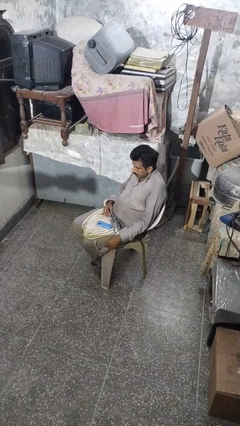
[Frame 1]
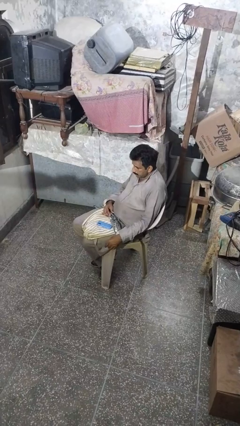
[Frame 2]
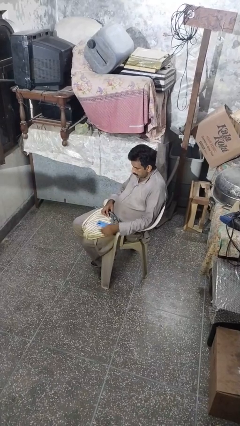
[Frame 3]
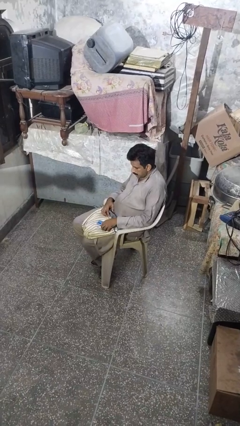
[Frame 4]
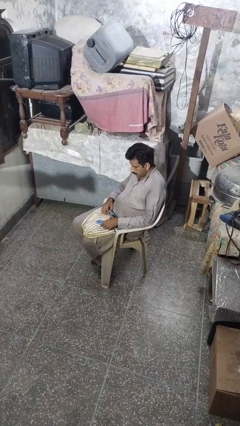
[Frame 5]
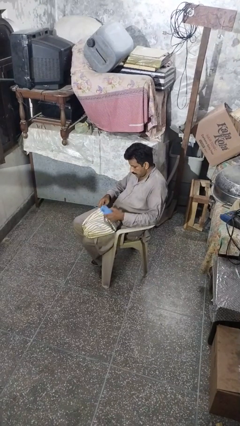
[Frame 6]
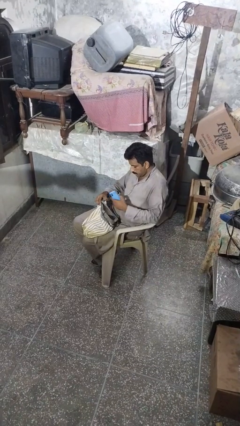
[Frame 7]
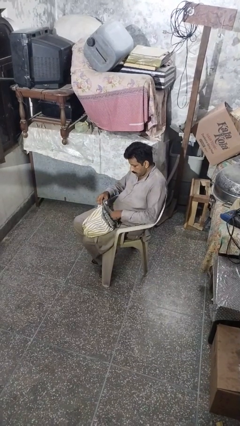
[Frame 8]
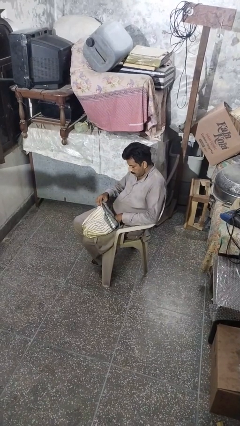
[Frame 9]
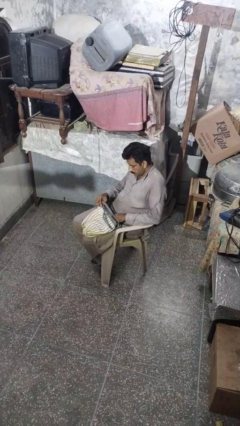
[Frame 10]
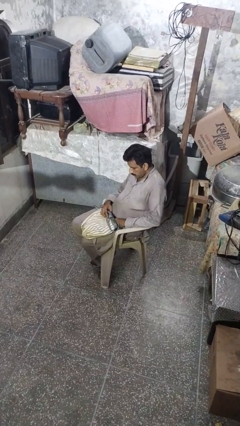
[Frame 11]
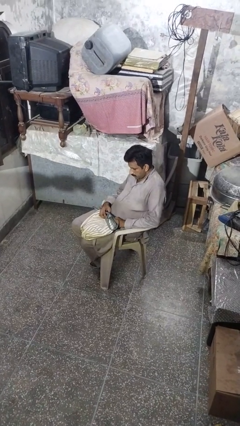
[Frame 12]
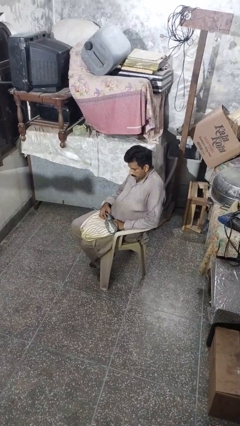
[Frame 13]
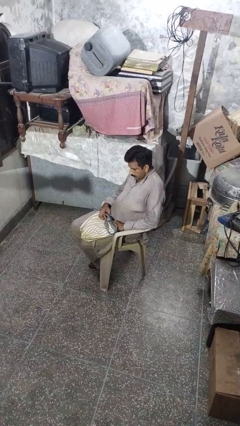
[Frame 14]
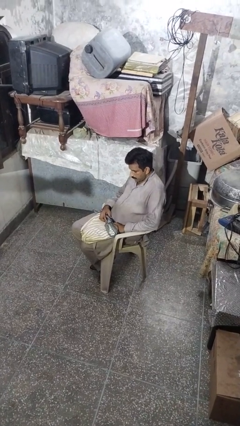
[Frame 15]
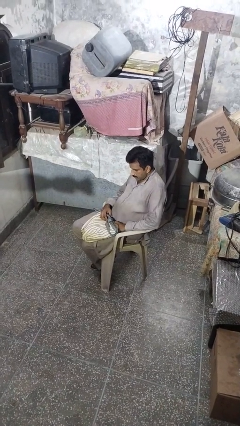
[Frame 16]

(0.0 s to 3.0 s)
person puts object into purse

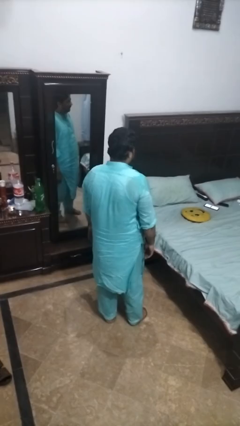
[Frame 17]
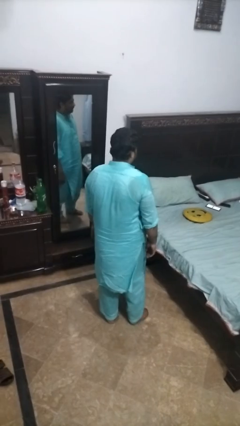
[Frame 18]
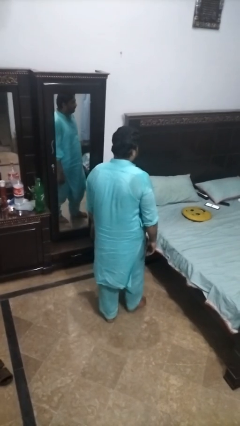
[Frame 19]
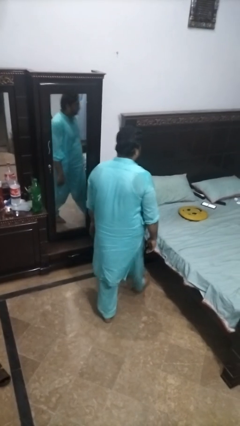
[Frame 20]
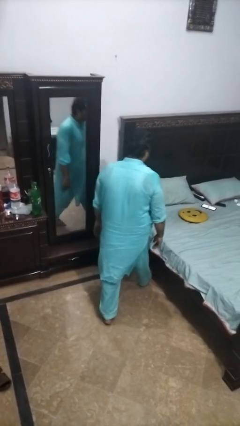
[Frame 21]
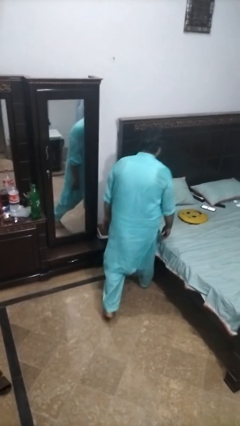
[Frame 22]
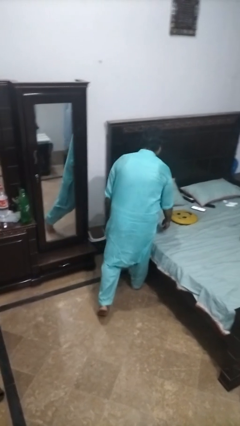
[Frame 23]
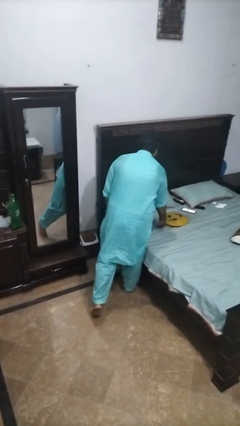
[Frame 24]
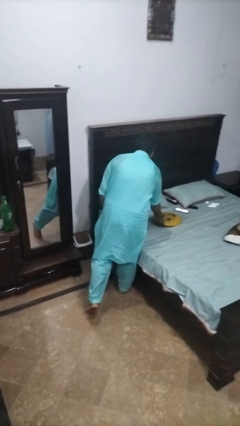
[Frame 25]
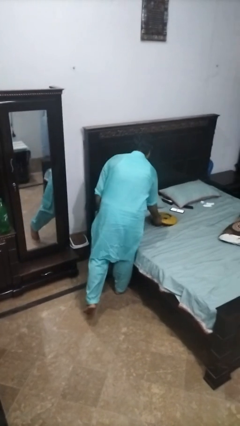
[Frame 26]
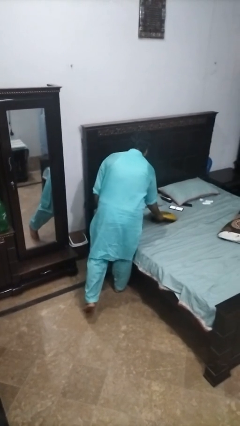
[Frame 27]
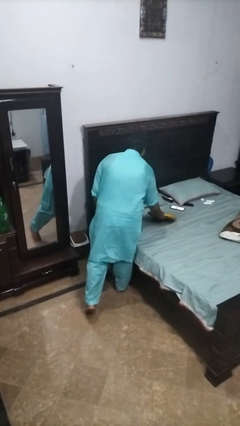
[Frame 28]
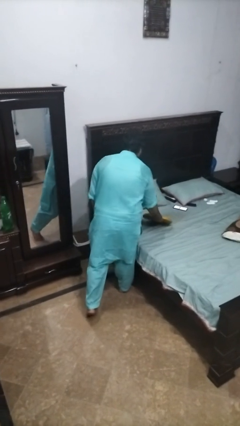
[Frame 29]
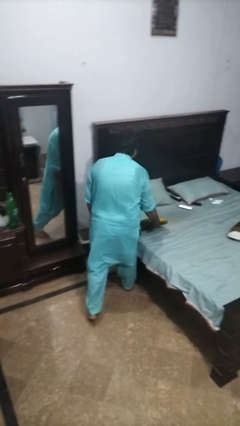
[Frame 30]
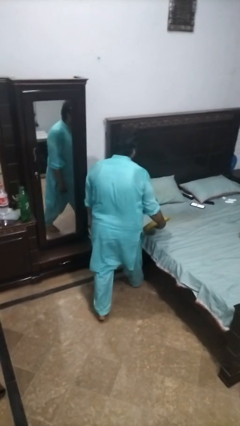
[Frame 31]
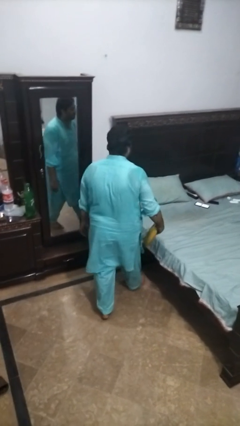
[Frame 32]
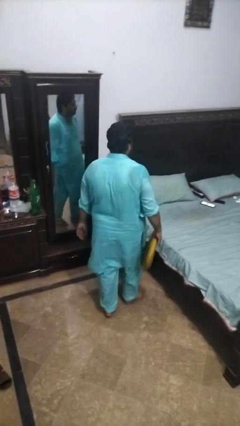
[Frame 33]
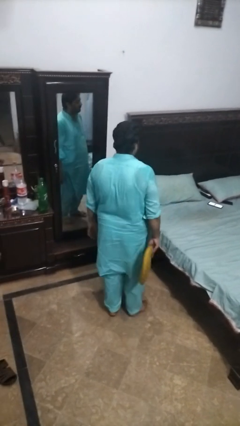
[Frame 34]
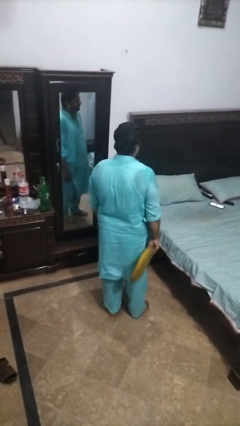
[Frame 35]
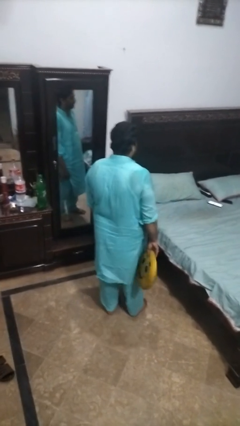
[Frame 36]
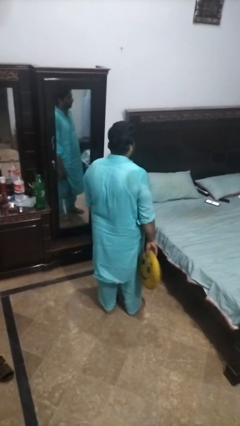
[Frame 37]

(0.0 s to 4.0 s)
person picks up object from bed

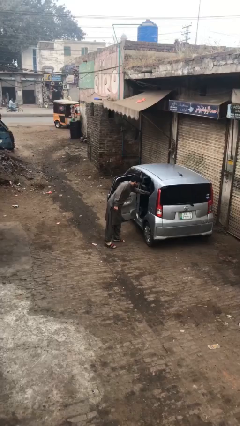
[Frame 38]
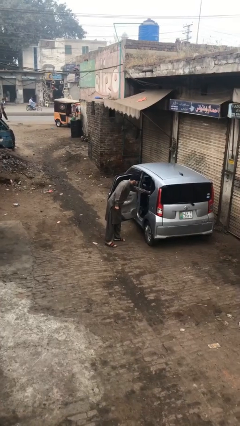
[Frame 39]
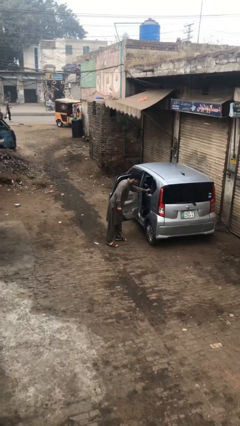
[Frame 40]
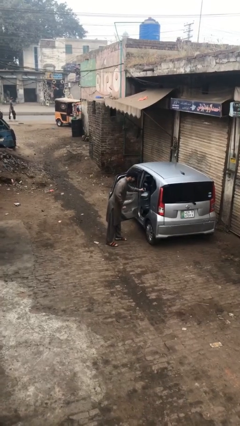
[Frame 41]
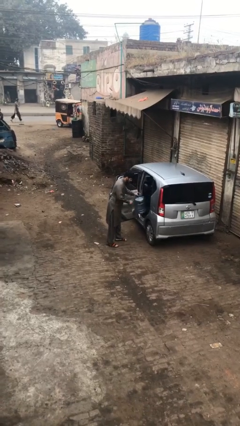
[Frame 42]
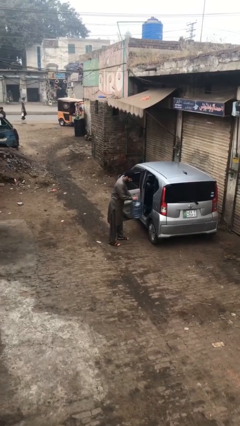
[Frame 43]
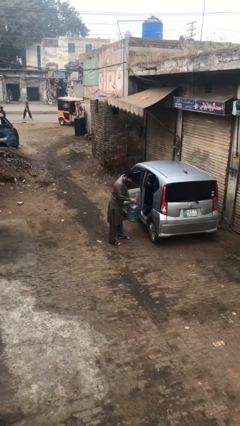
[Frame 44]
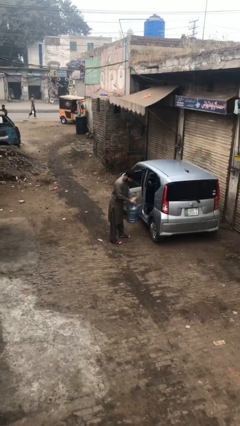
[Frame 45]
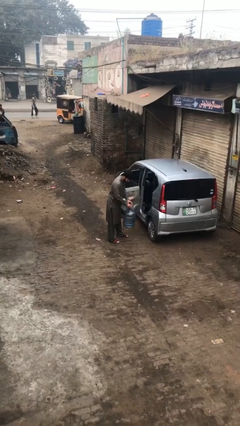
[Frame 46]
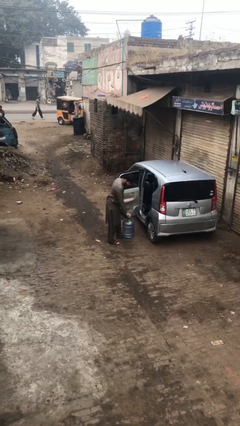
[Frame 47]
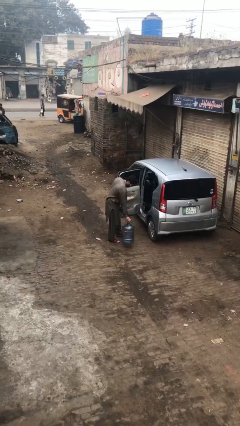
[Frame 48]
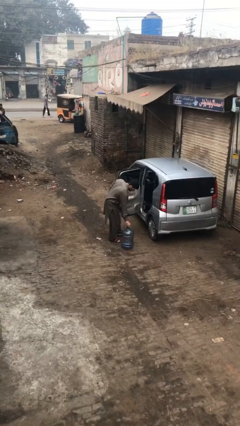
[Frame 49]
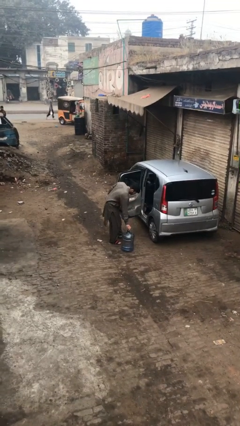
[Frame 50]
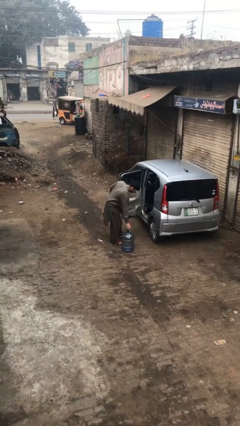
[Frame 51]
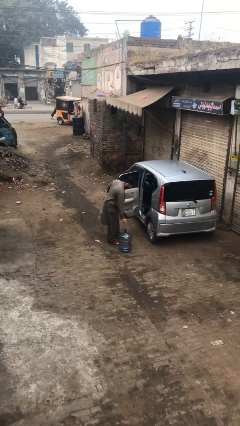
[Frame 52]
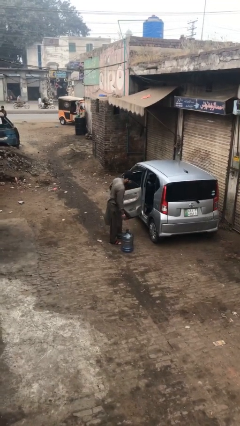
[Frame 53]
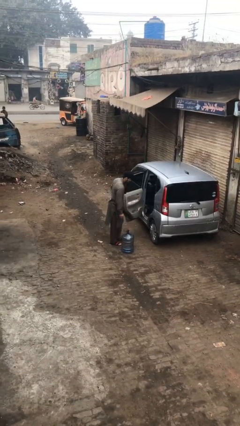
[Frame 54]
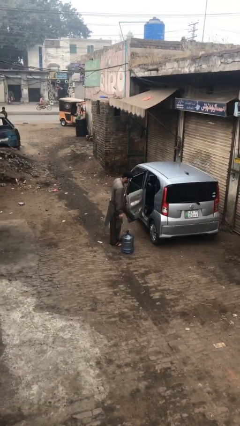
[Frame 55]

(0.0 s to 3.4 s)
person unloads car

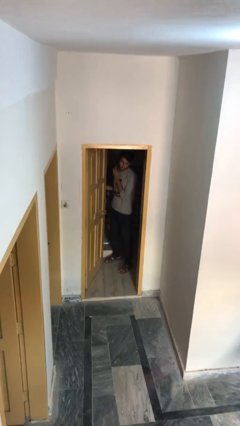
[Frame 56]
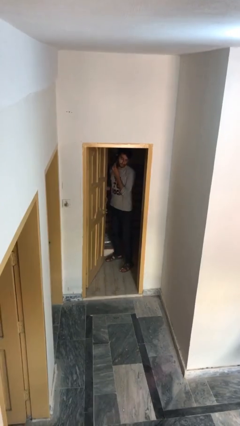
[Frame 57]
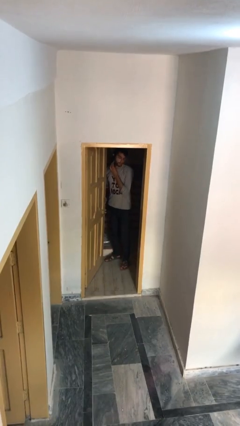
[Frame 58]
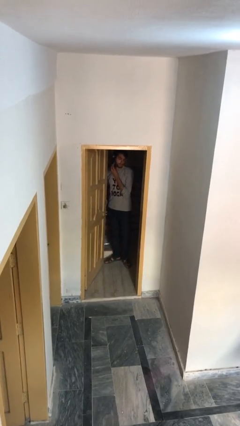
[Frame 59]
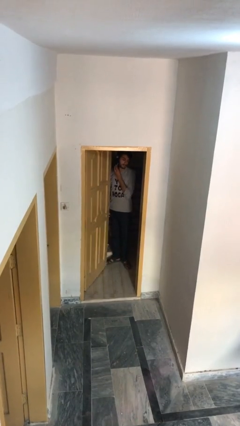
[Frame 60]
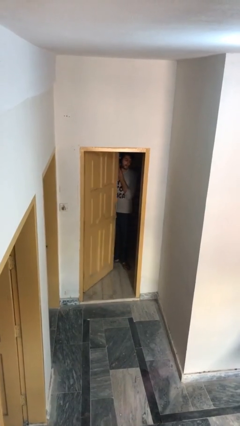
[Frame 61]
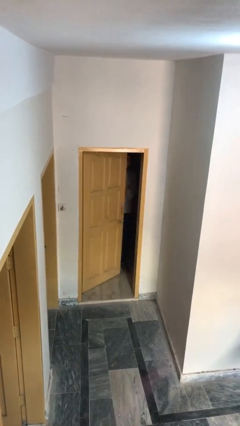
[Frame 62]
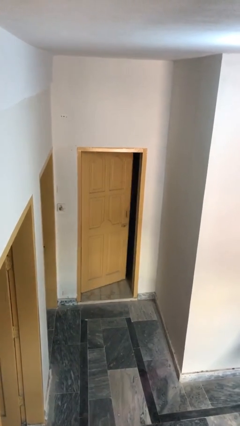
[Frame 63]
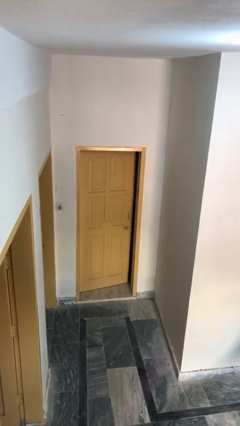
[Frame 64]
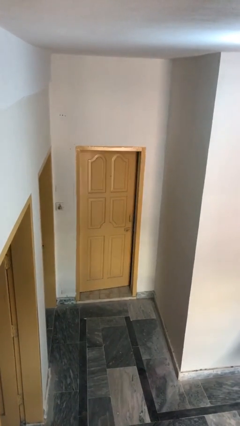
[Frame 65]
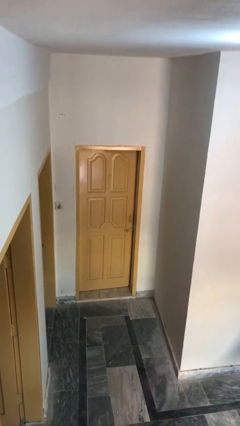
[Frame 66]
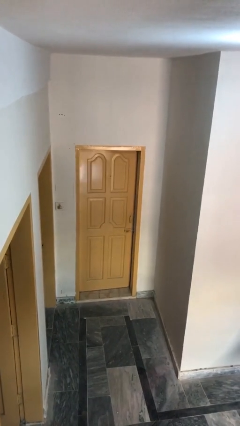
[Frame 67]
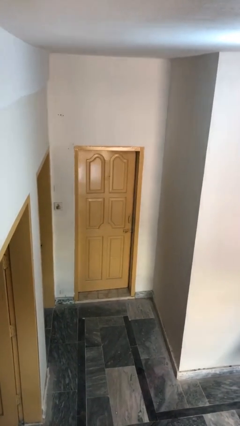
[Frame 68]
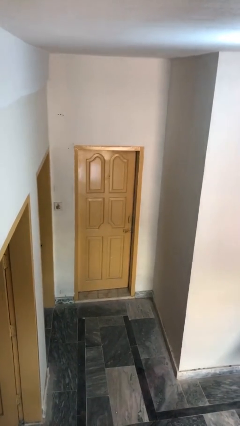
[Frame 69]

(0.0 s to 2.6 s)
person closes facility door

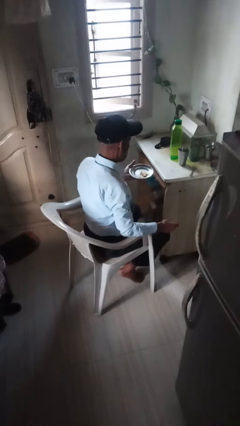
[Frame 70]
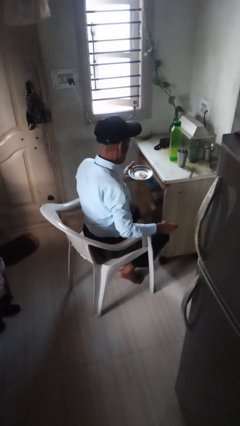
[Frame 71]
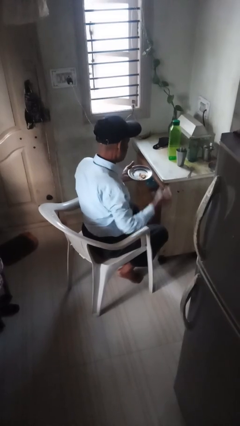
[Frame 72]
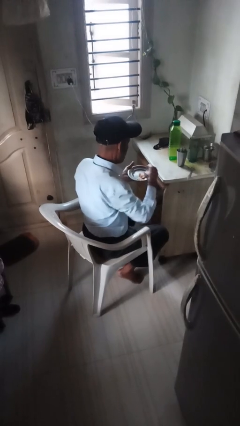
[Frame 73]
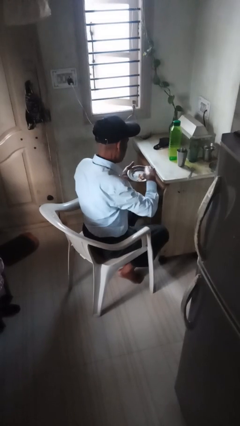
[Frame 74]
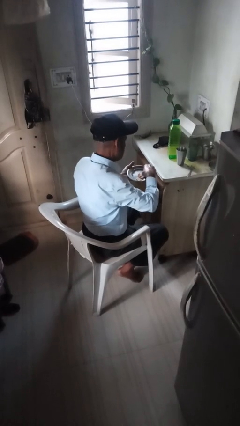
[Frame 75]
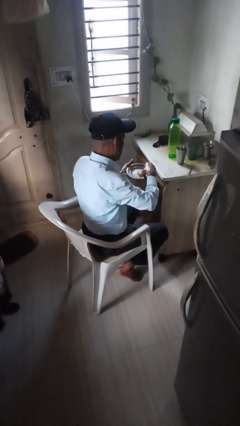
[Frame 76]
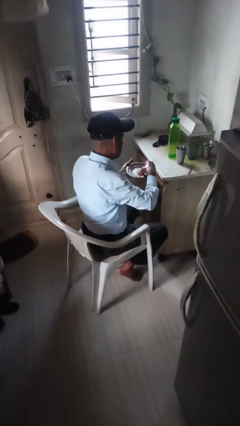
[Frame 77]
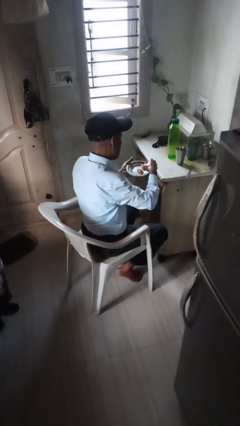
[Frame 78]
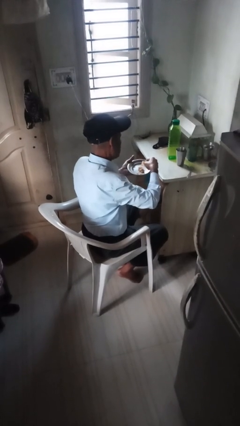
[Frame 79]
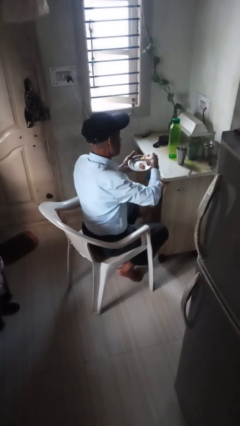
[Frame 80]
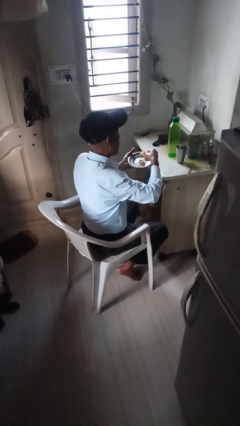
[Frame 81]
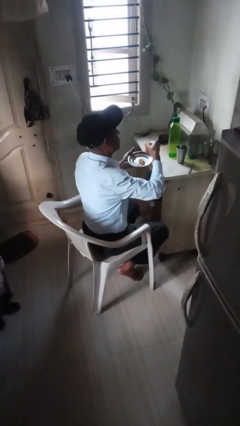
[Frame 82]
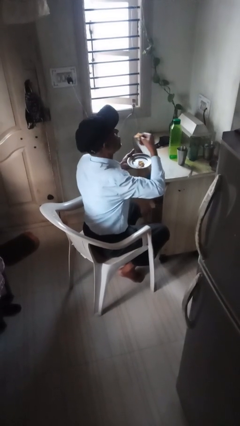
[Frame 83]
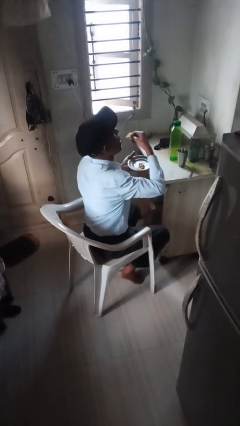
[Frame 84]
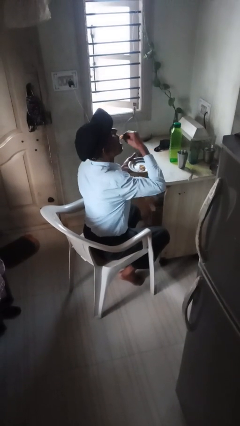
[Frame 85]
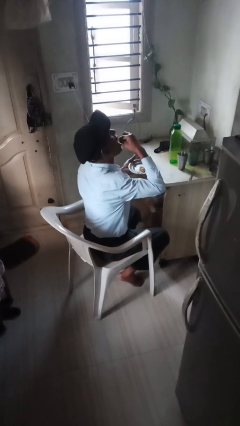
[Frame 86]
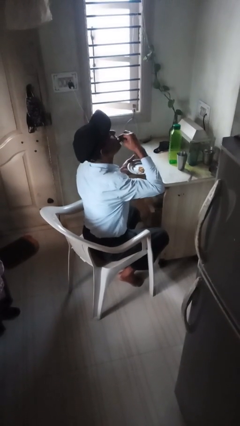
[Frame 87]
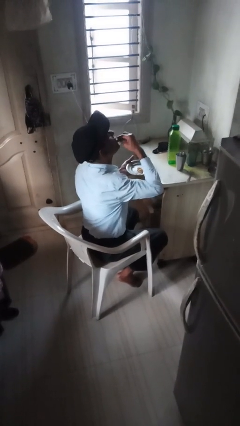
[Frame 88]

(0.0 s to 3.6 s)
person eats with hands

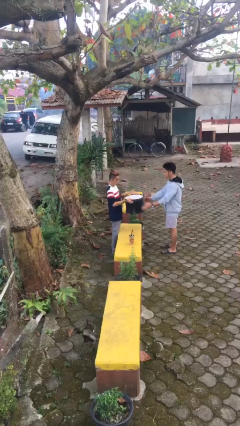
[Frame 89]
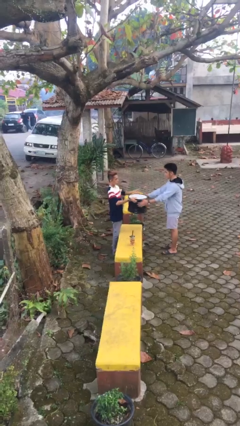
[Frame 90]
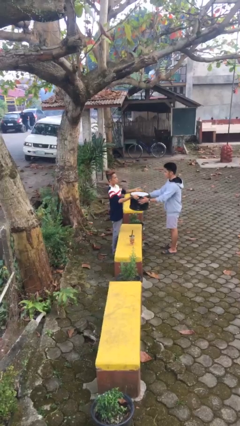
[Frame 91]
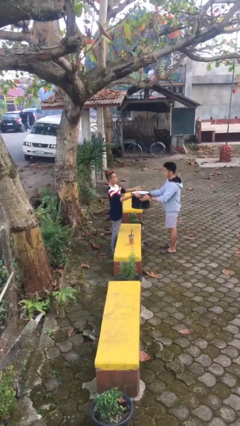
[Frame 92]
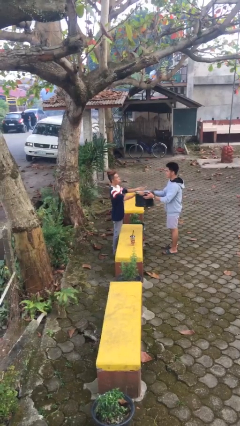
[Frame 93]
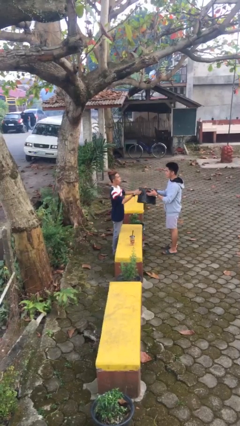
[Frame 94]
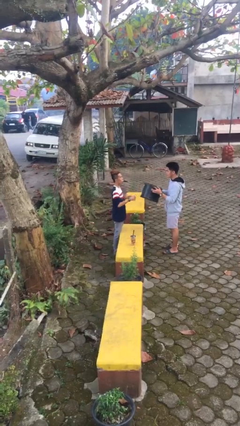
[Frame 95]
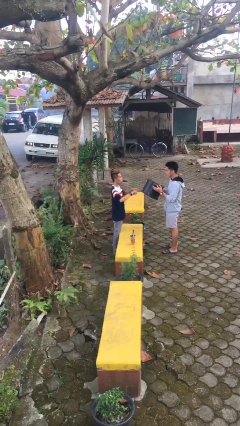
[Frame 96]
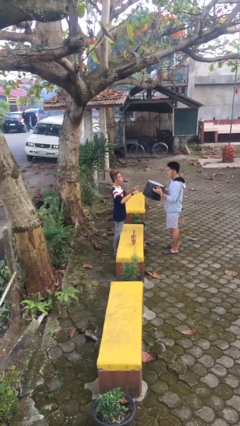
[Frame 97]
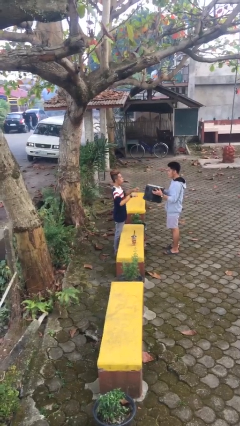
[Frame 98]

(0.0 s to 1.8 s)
person transfers object to person
